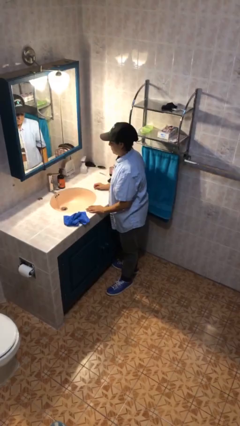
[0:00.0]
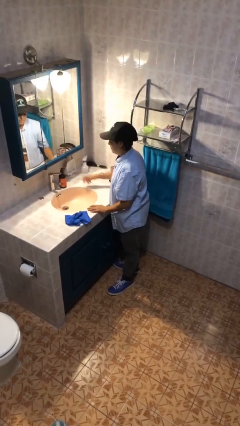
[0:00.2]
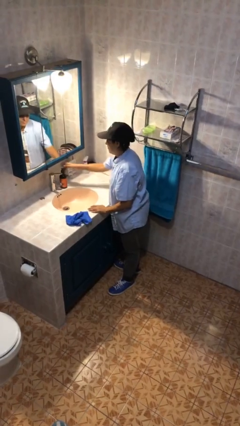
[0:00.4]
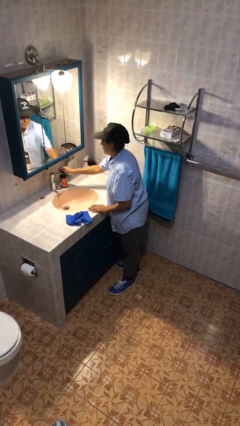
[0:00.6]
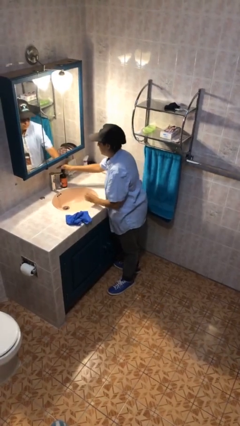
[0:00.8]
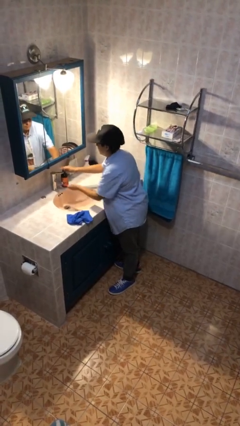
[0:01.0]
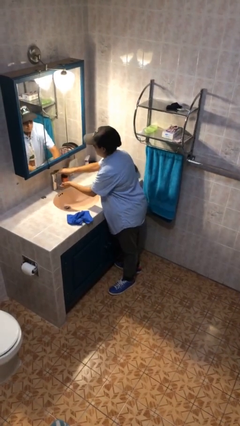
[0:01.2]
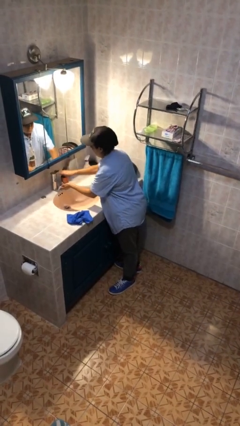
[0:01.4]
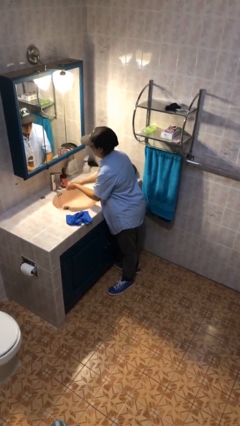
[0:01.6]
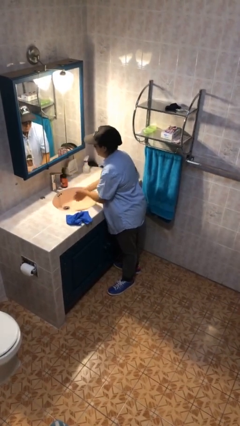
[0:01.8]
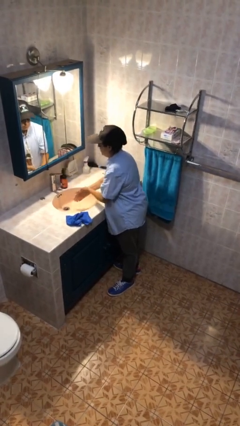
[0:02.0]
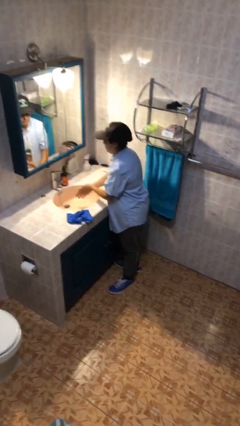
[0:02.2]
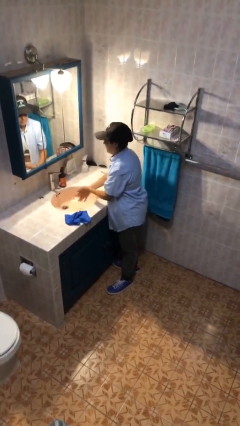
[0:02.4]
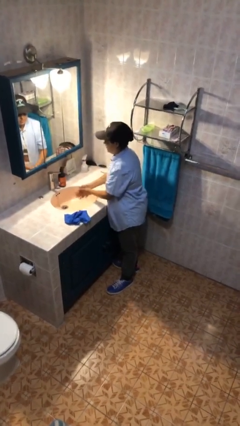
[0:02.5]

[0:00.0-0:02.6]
person washes hands

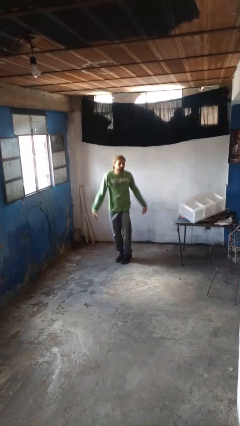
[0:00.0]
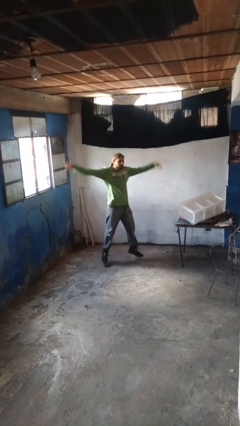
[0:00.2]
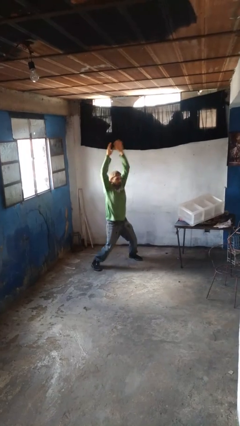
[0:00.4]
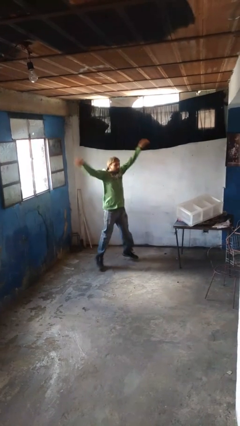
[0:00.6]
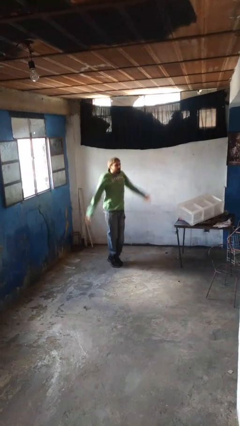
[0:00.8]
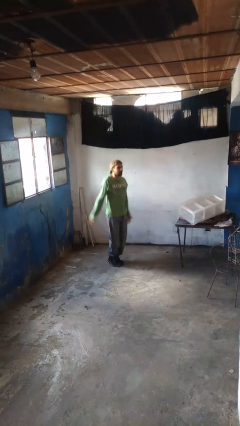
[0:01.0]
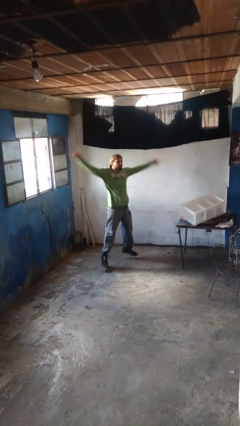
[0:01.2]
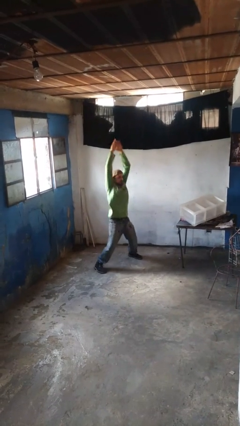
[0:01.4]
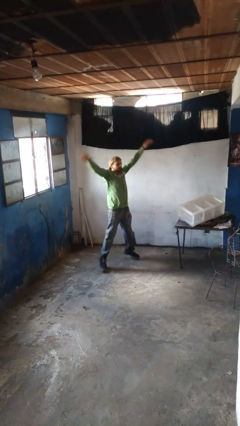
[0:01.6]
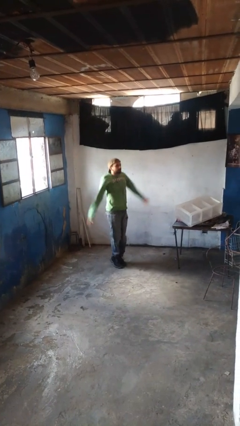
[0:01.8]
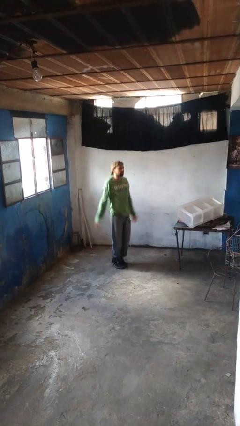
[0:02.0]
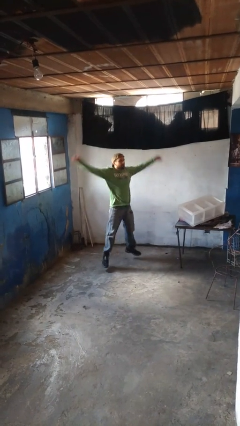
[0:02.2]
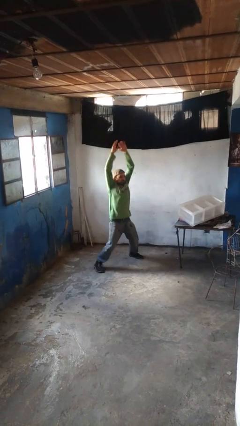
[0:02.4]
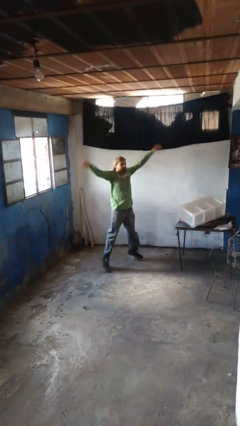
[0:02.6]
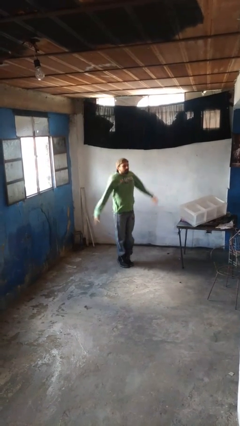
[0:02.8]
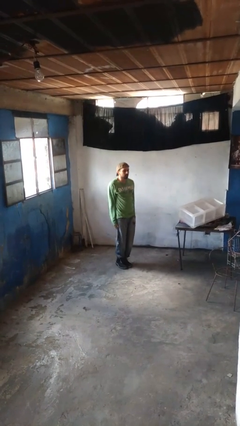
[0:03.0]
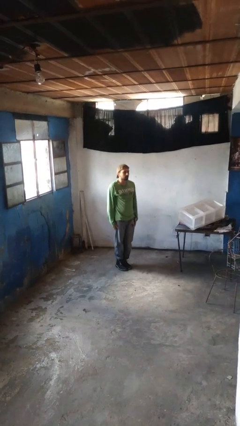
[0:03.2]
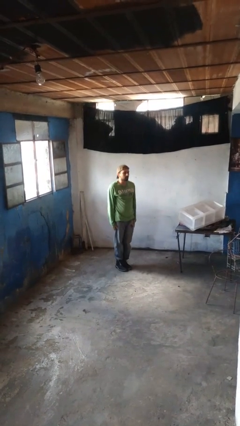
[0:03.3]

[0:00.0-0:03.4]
person exercises with jumping jacks

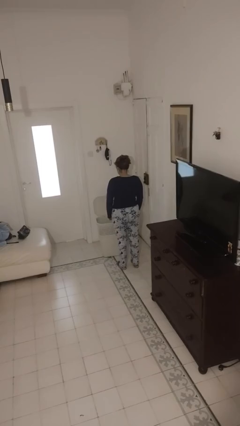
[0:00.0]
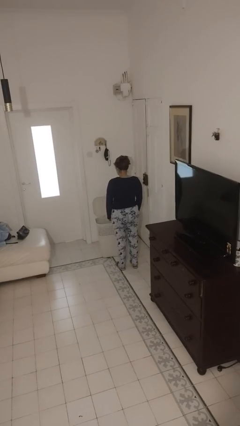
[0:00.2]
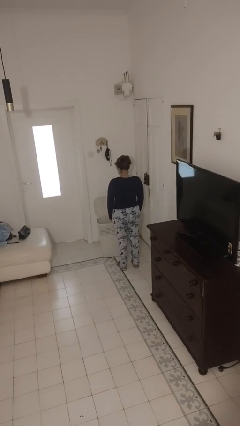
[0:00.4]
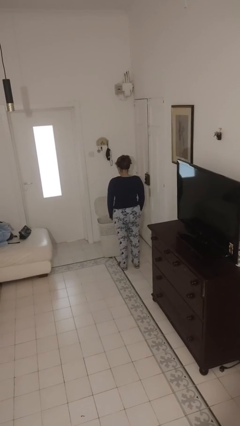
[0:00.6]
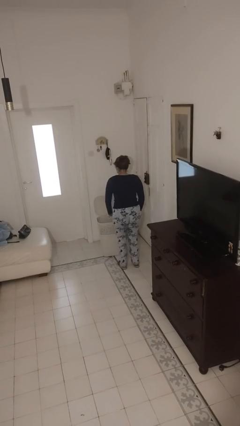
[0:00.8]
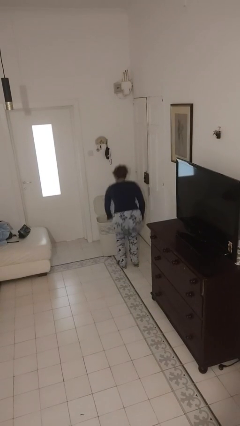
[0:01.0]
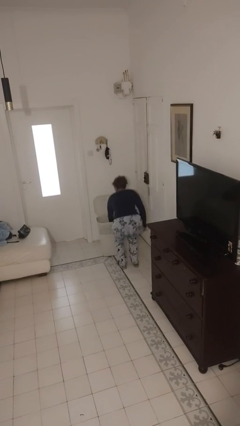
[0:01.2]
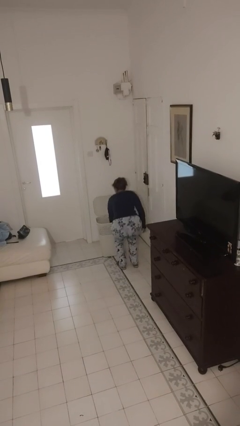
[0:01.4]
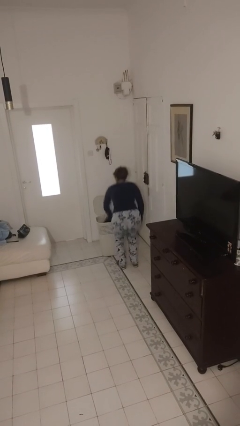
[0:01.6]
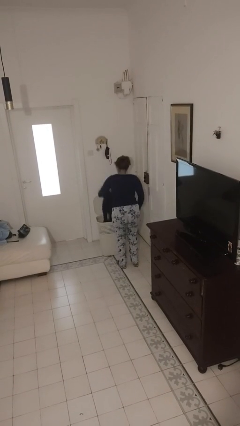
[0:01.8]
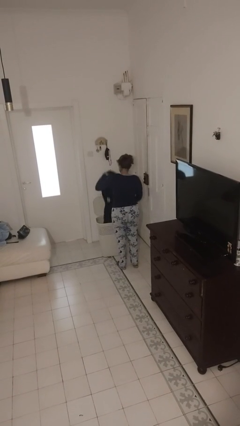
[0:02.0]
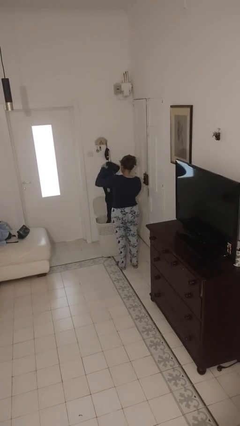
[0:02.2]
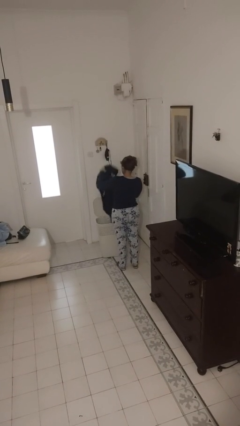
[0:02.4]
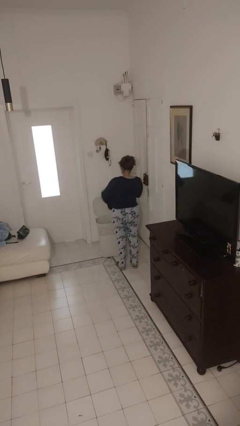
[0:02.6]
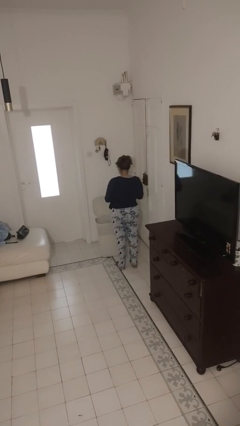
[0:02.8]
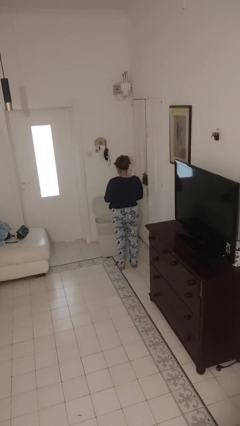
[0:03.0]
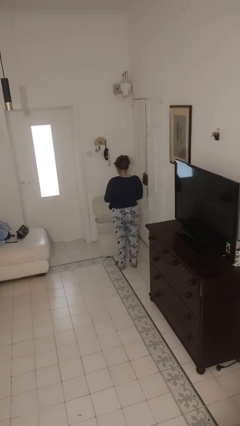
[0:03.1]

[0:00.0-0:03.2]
person takes object from basket

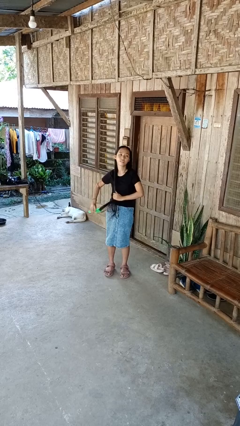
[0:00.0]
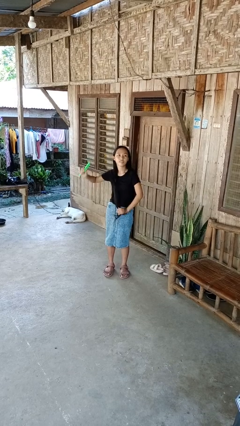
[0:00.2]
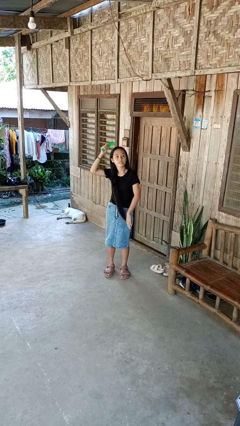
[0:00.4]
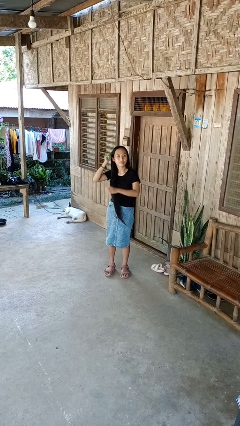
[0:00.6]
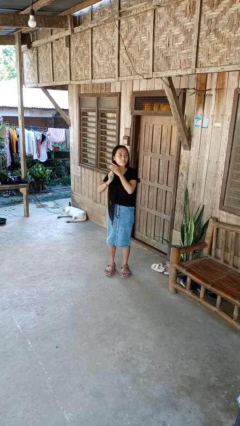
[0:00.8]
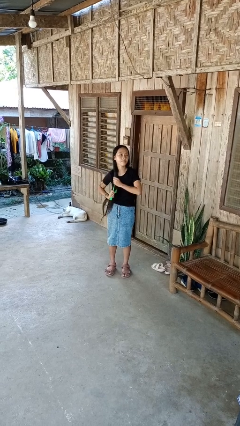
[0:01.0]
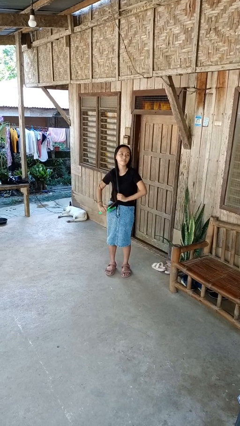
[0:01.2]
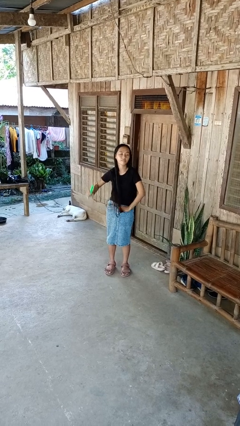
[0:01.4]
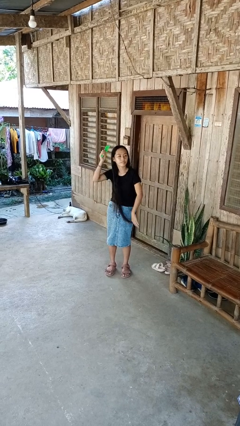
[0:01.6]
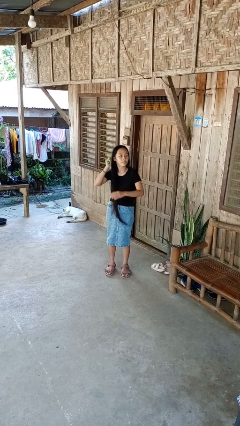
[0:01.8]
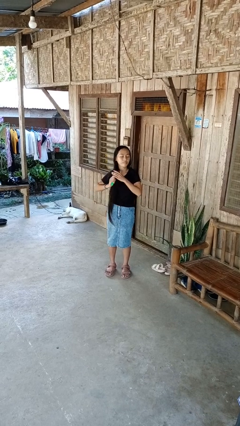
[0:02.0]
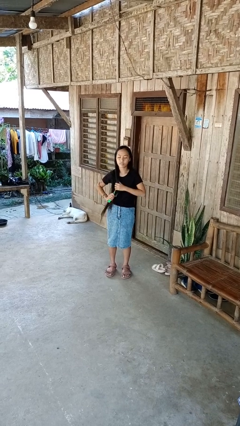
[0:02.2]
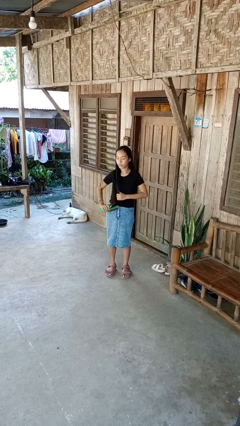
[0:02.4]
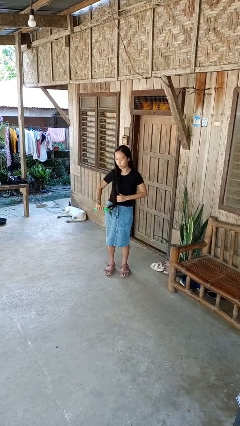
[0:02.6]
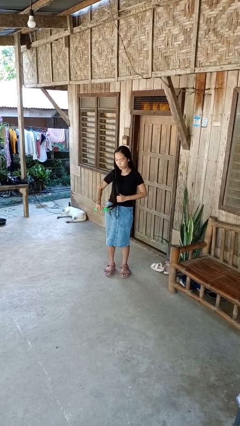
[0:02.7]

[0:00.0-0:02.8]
person brushes hair

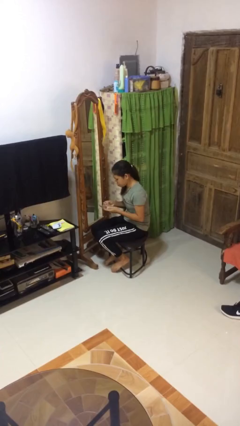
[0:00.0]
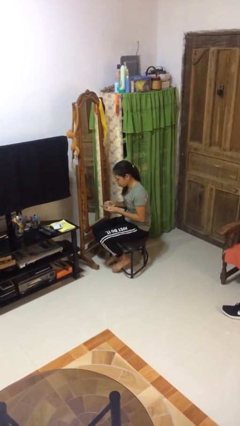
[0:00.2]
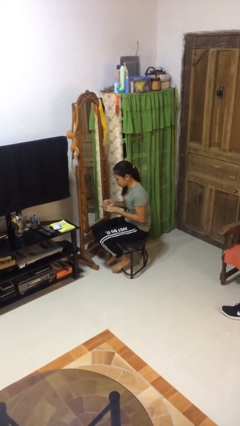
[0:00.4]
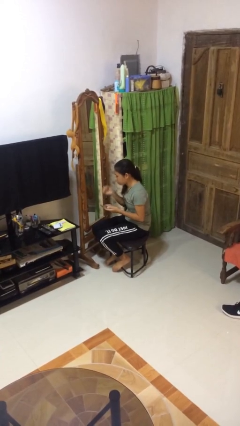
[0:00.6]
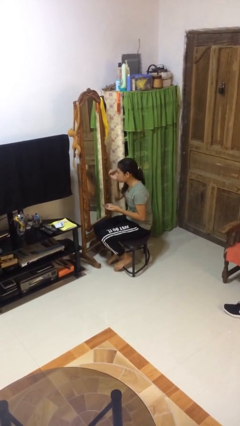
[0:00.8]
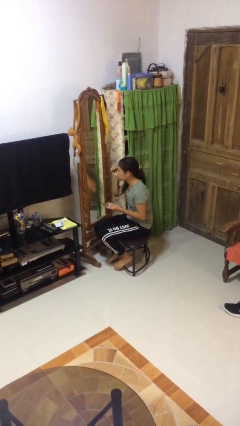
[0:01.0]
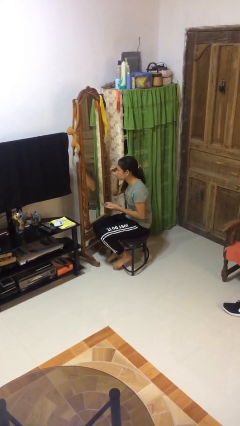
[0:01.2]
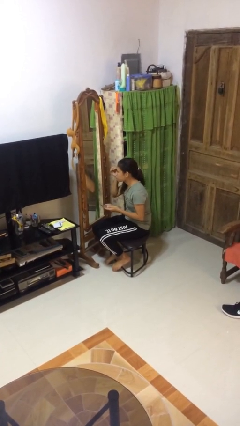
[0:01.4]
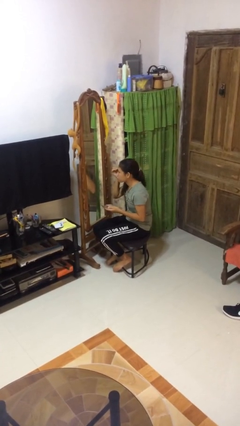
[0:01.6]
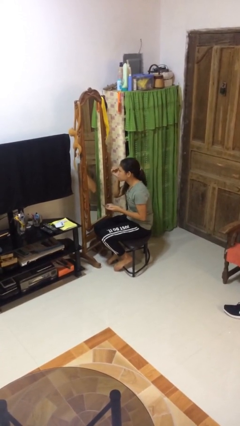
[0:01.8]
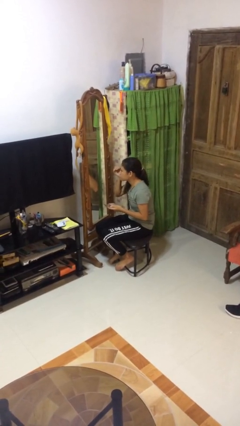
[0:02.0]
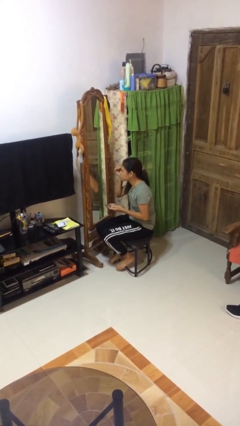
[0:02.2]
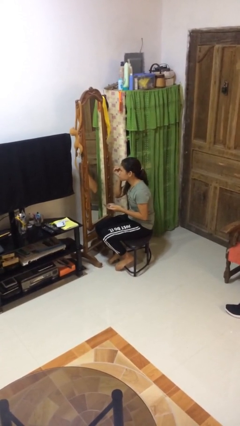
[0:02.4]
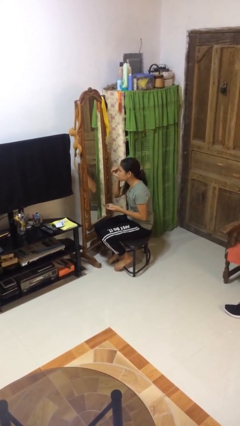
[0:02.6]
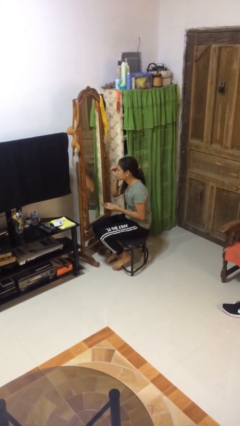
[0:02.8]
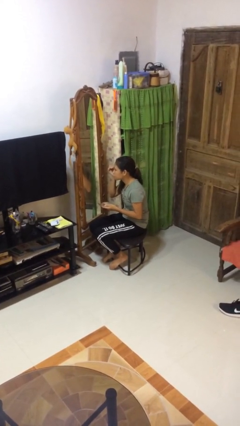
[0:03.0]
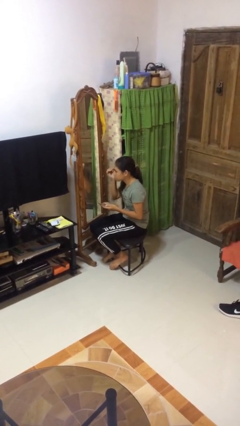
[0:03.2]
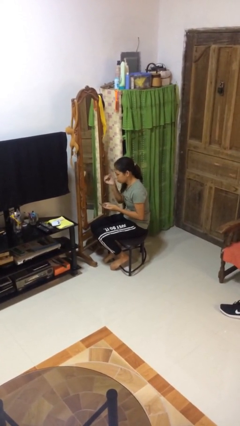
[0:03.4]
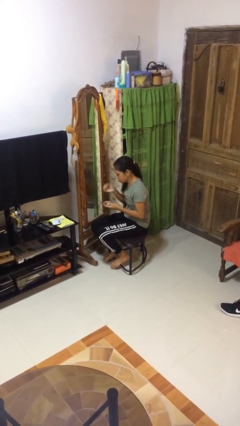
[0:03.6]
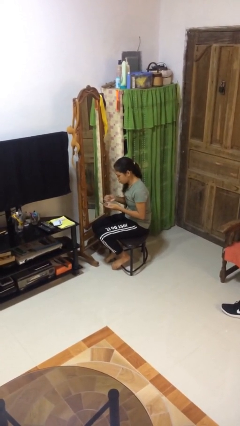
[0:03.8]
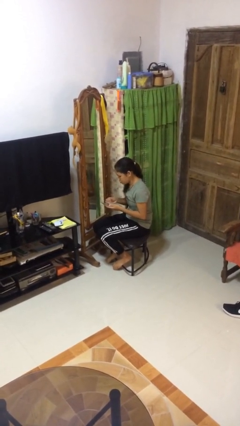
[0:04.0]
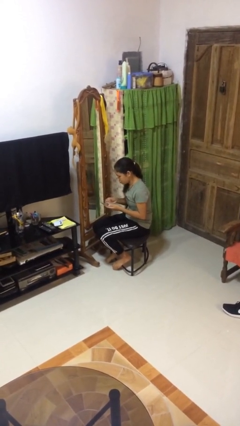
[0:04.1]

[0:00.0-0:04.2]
person applies eye makeup

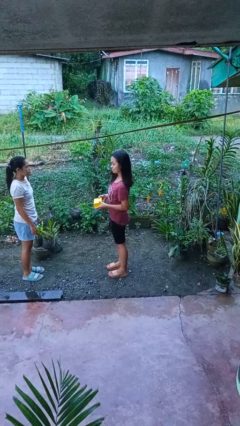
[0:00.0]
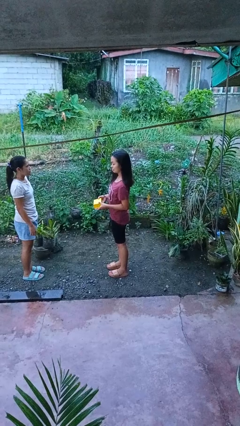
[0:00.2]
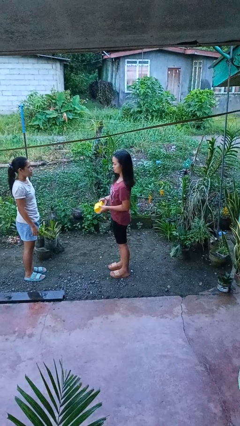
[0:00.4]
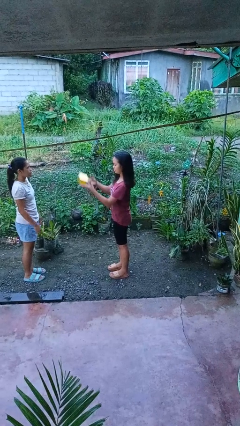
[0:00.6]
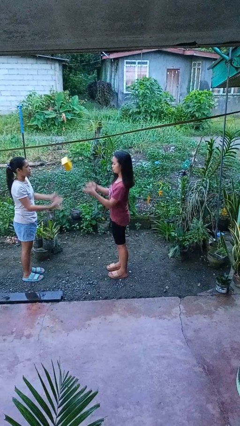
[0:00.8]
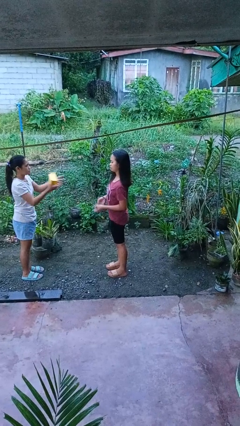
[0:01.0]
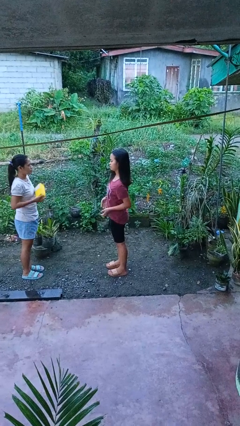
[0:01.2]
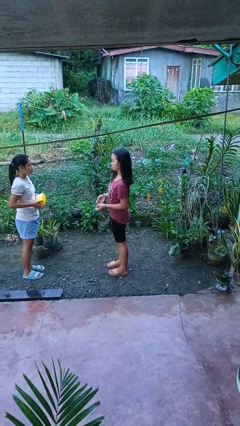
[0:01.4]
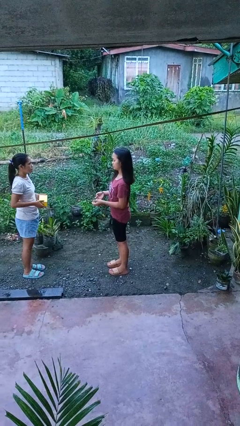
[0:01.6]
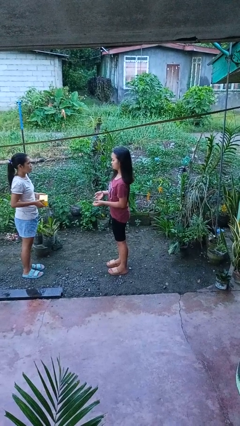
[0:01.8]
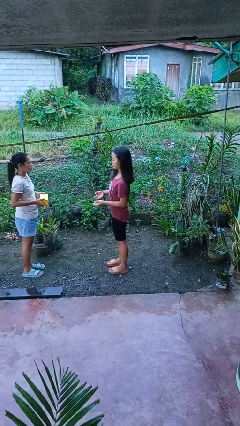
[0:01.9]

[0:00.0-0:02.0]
person throws object to person
